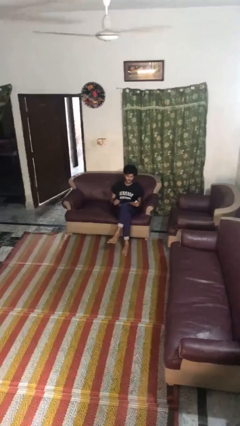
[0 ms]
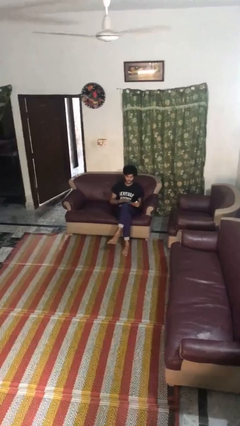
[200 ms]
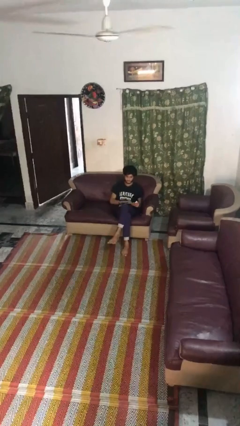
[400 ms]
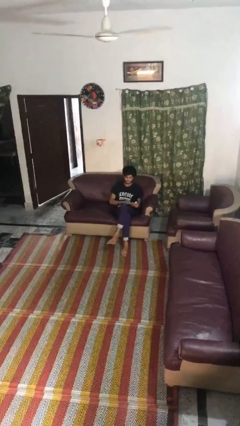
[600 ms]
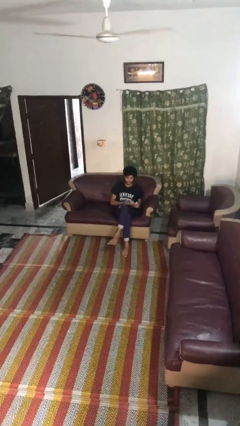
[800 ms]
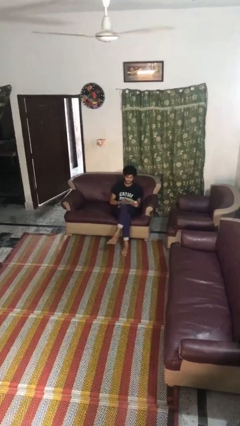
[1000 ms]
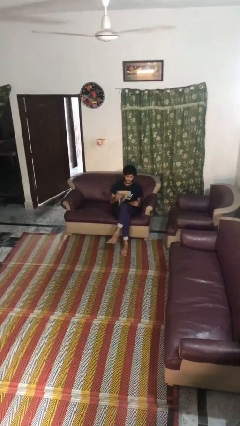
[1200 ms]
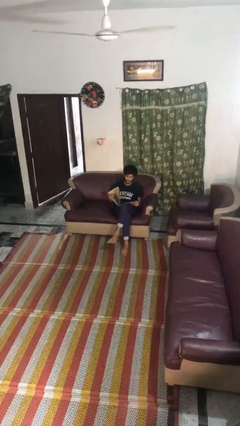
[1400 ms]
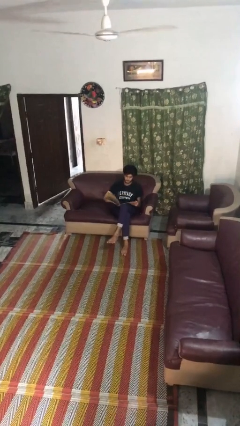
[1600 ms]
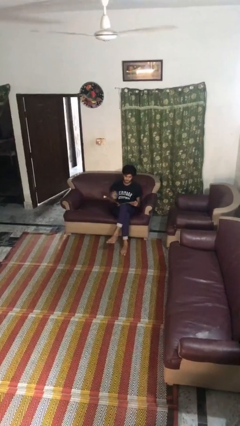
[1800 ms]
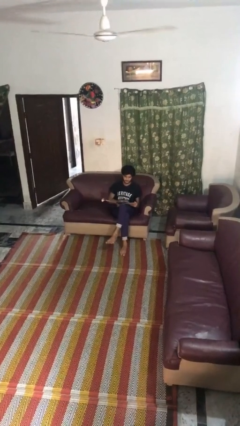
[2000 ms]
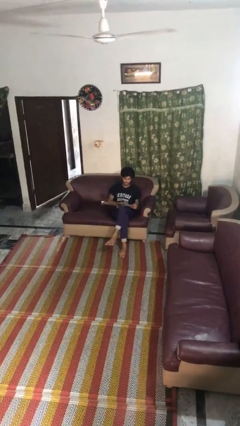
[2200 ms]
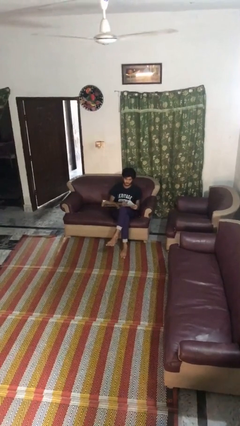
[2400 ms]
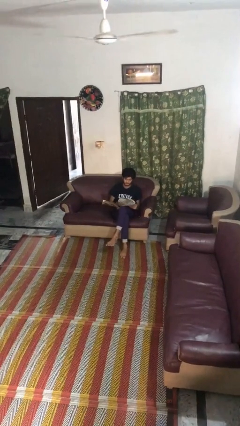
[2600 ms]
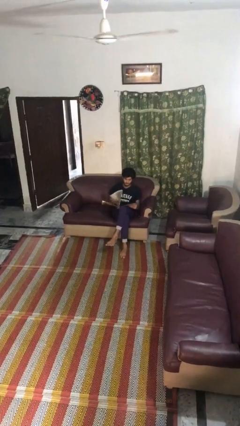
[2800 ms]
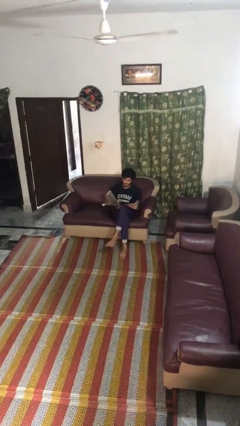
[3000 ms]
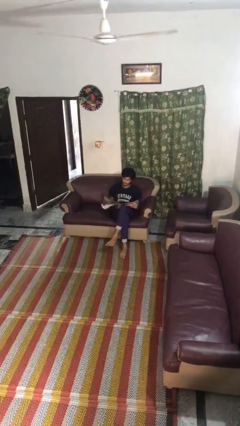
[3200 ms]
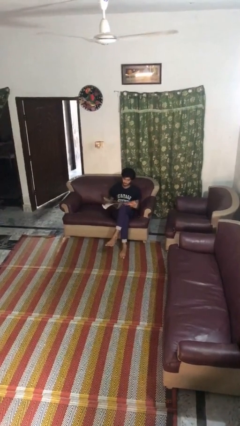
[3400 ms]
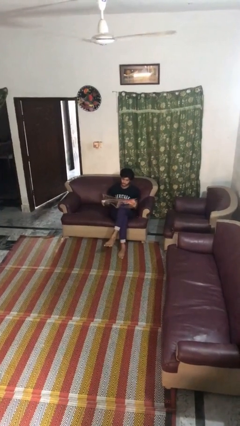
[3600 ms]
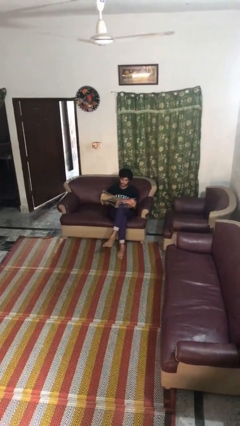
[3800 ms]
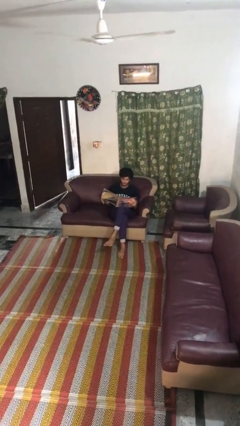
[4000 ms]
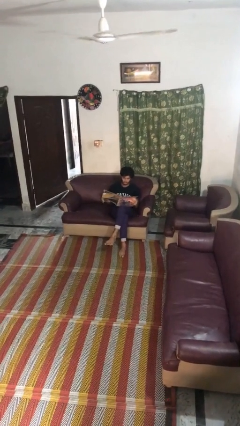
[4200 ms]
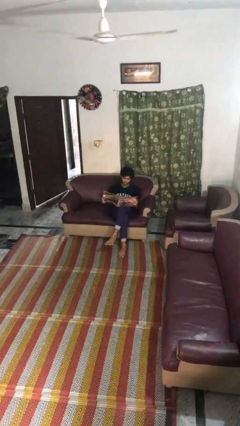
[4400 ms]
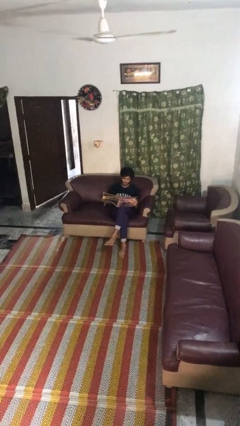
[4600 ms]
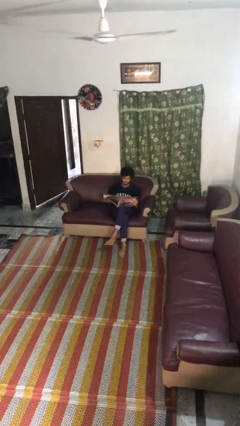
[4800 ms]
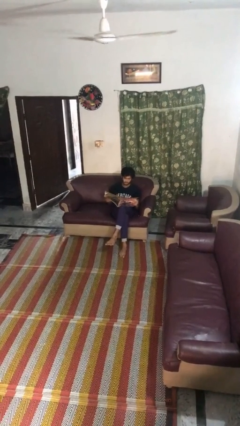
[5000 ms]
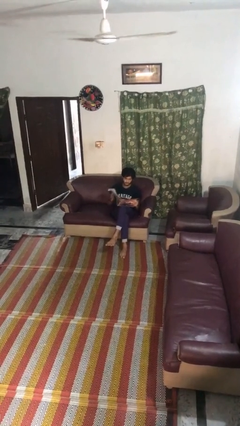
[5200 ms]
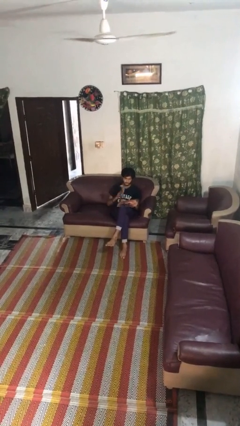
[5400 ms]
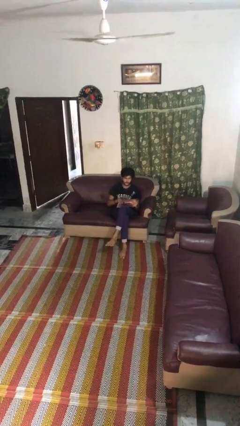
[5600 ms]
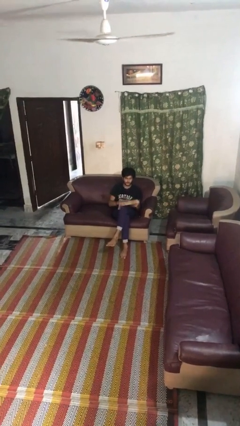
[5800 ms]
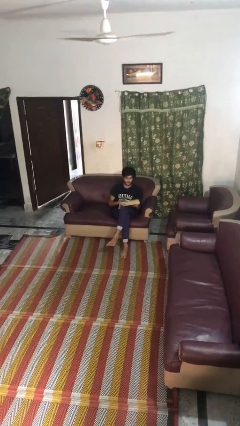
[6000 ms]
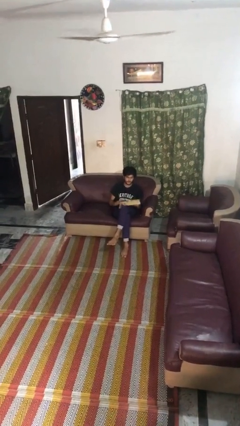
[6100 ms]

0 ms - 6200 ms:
person reads magazine

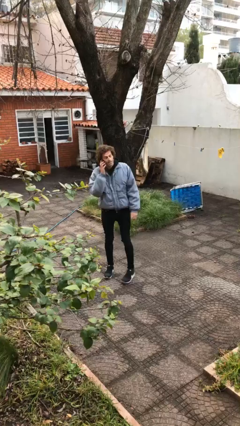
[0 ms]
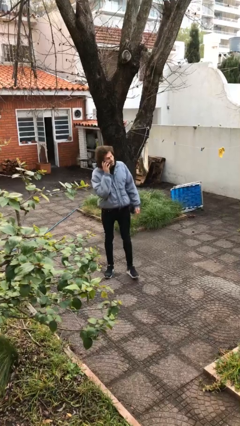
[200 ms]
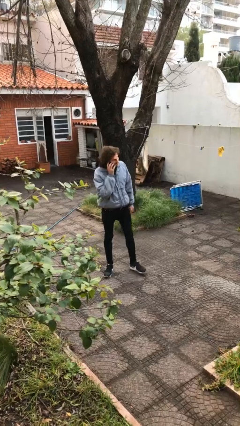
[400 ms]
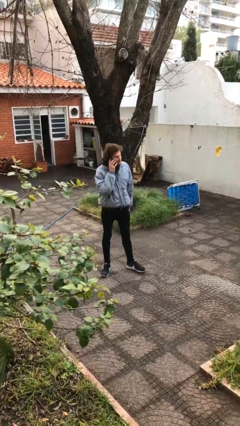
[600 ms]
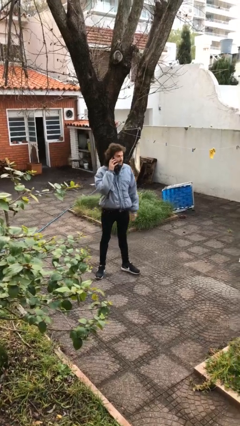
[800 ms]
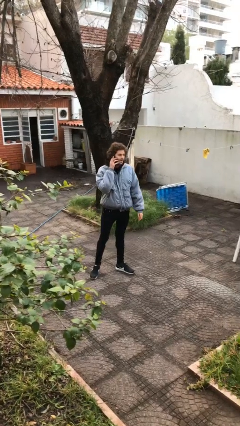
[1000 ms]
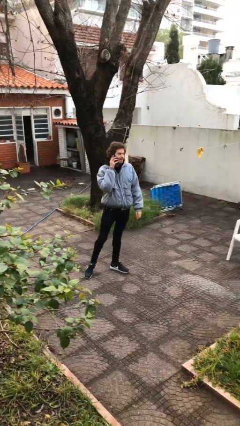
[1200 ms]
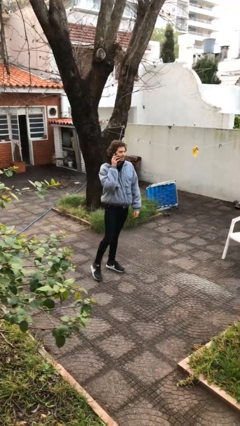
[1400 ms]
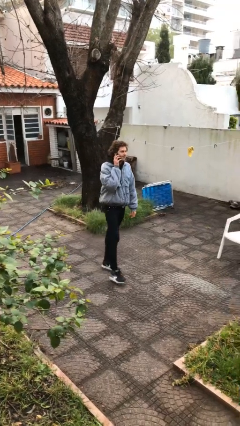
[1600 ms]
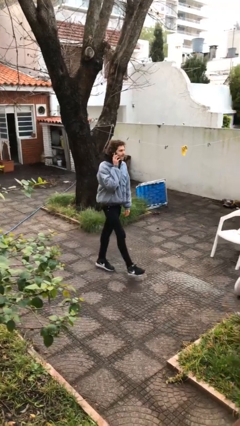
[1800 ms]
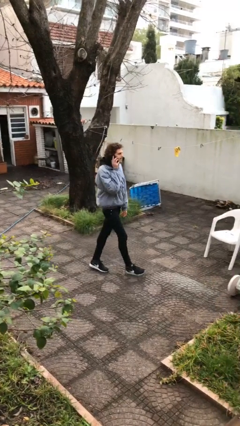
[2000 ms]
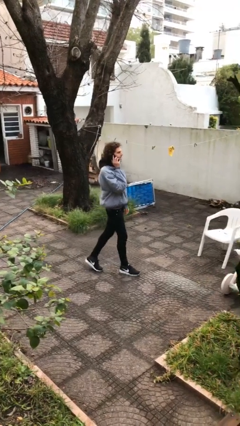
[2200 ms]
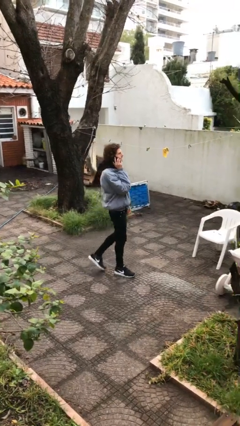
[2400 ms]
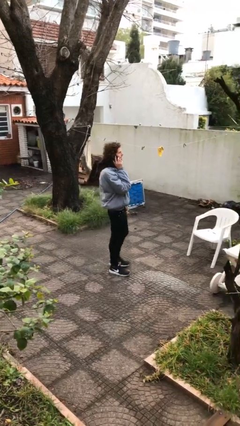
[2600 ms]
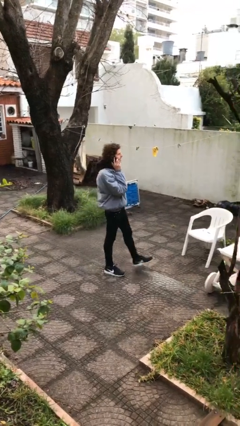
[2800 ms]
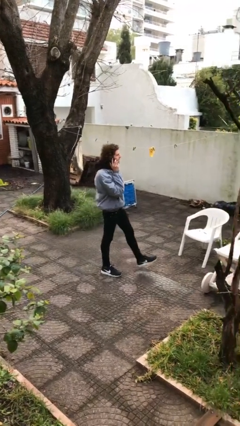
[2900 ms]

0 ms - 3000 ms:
person talks on phone

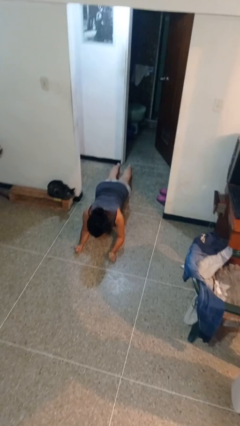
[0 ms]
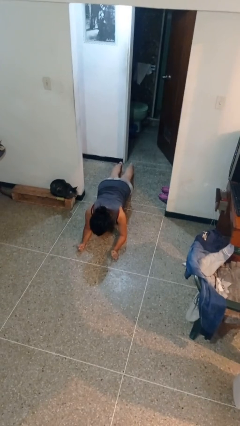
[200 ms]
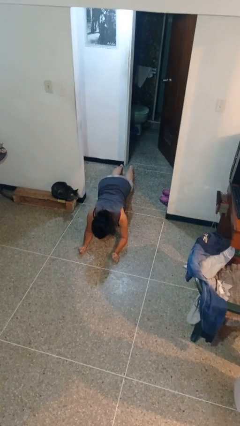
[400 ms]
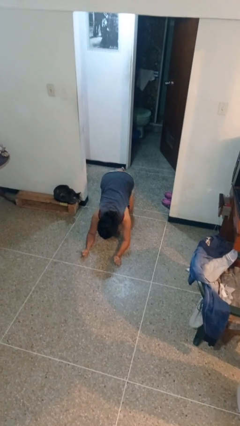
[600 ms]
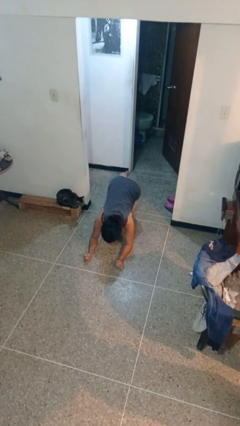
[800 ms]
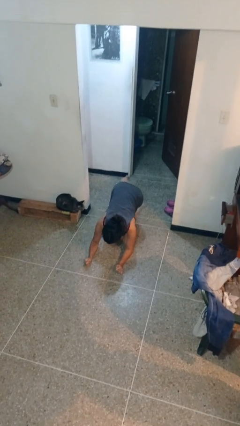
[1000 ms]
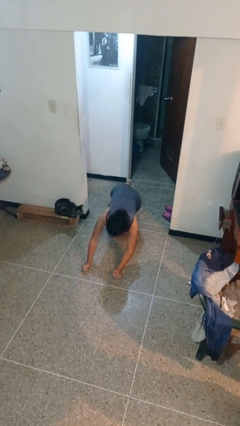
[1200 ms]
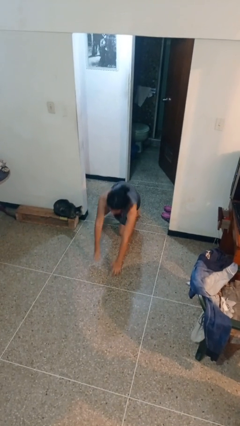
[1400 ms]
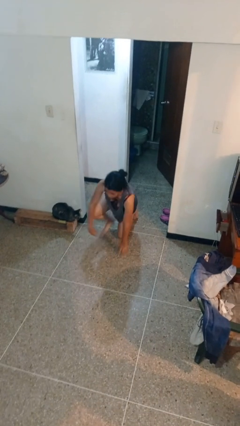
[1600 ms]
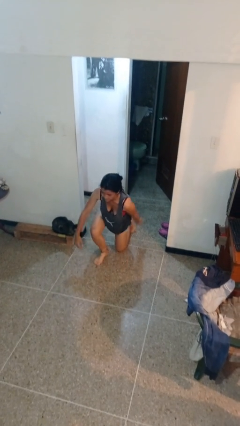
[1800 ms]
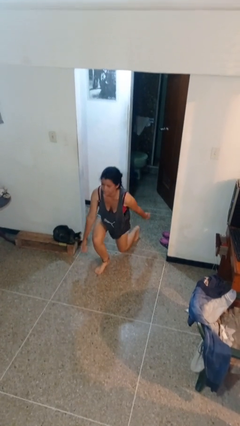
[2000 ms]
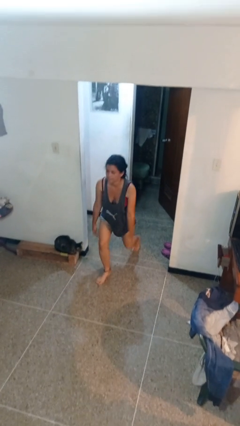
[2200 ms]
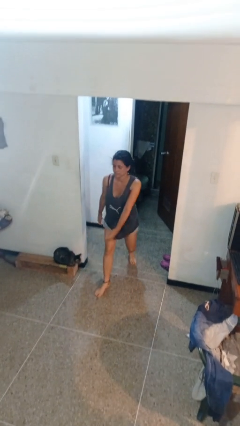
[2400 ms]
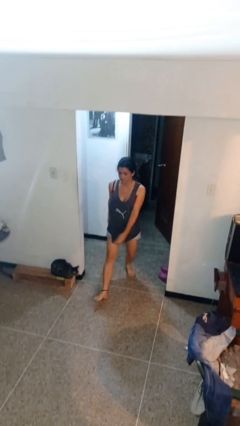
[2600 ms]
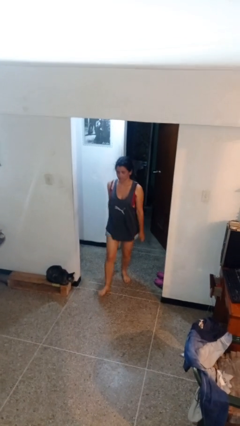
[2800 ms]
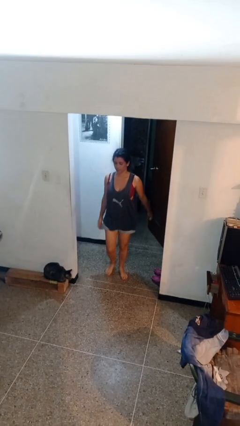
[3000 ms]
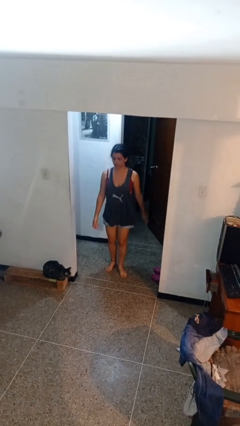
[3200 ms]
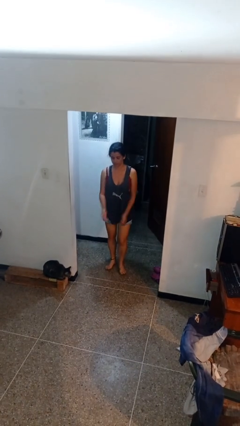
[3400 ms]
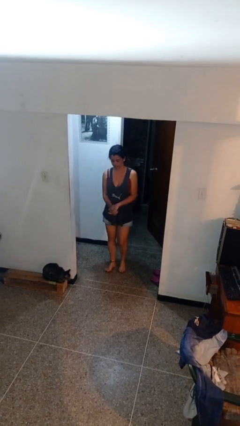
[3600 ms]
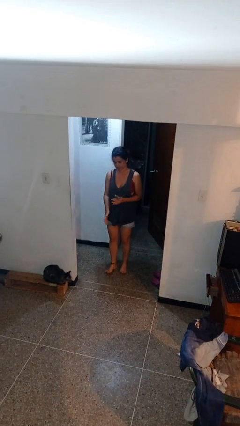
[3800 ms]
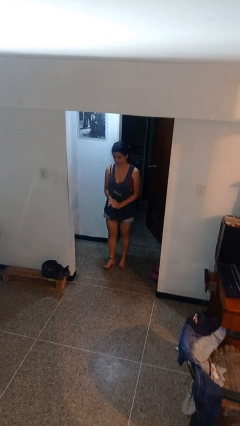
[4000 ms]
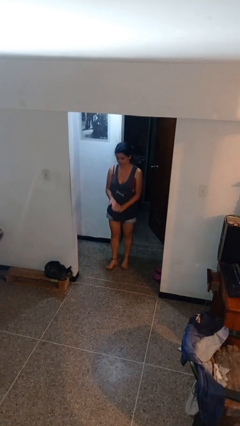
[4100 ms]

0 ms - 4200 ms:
person stands up from floor

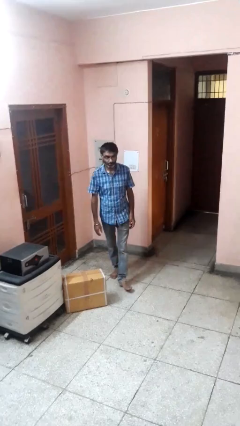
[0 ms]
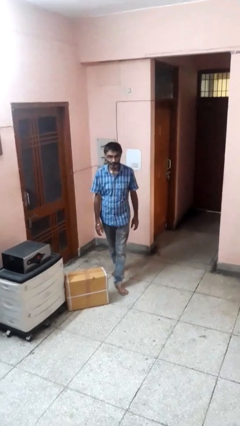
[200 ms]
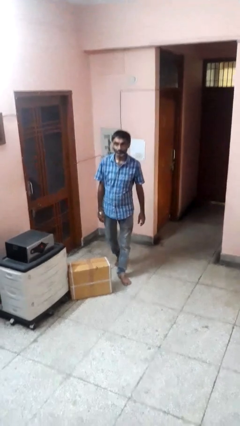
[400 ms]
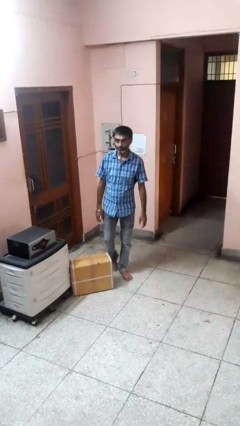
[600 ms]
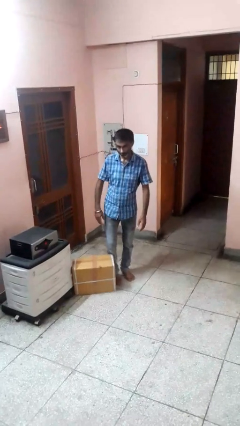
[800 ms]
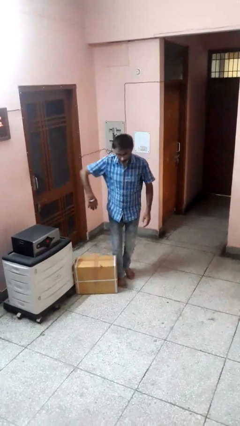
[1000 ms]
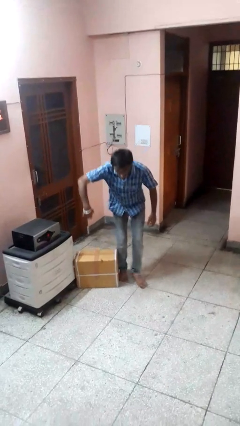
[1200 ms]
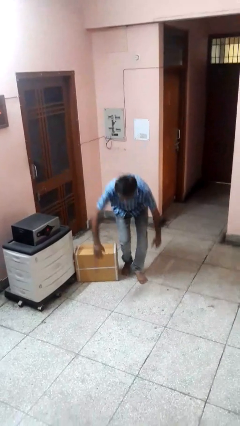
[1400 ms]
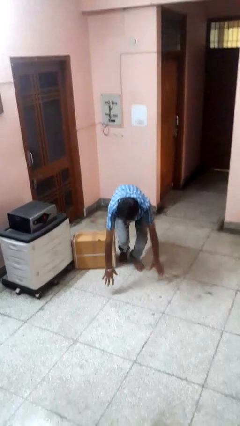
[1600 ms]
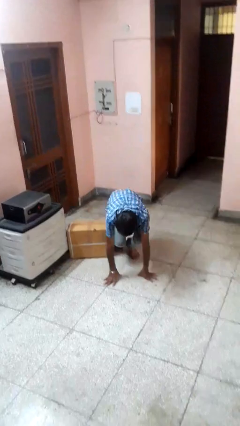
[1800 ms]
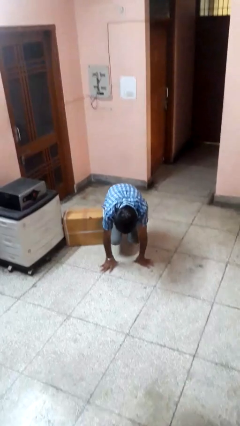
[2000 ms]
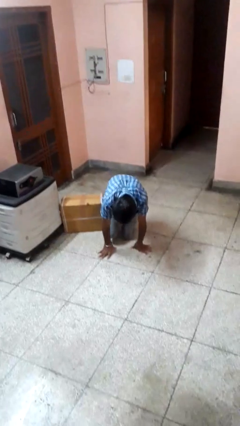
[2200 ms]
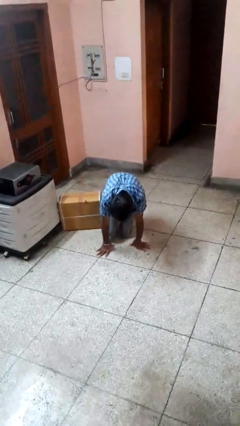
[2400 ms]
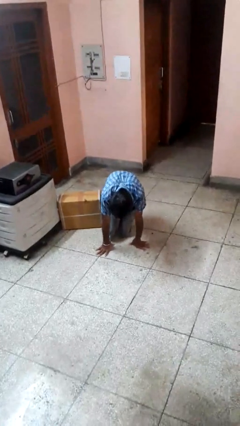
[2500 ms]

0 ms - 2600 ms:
person trips on object on floor

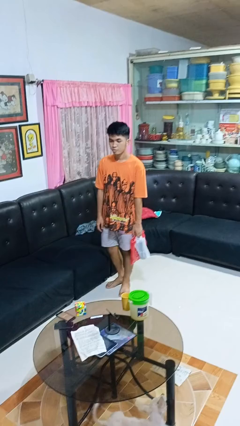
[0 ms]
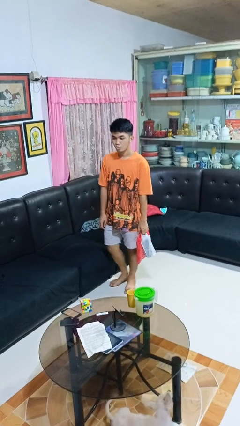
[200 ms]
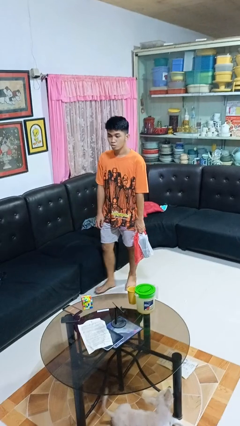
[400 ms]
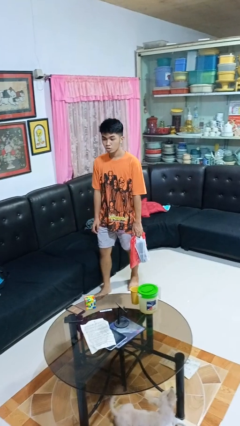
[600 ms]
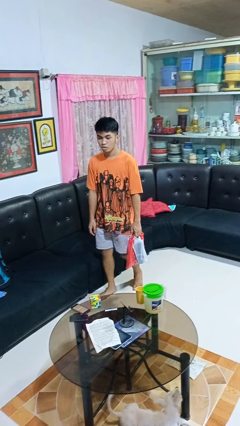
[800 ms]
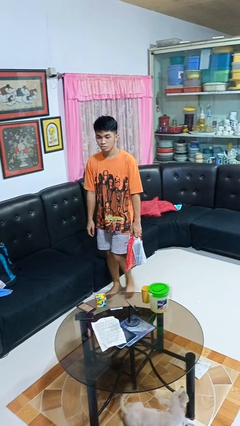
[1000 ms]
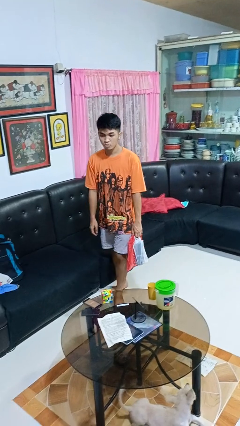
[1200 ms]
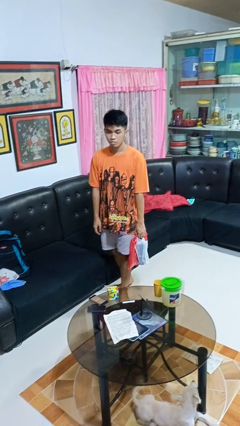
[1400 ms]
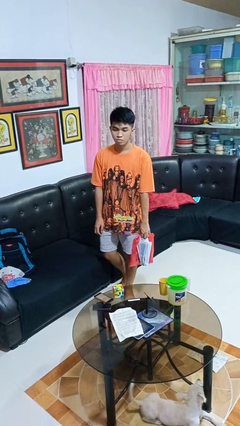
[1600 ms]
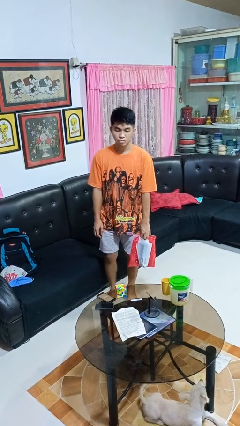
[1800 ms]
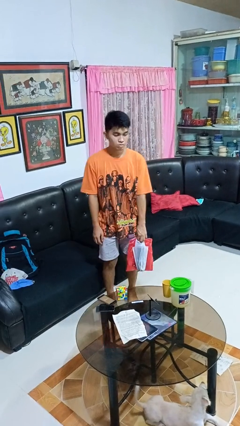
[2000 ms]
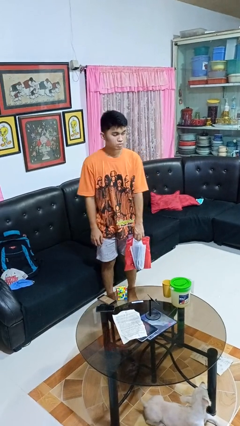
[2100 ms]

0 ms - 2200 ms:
person carries groceries
